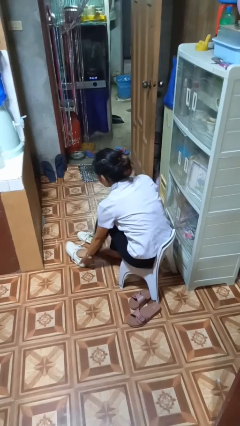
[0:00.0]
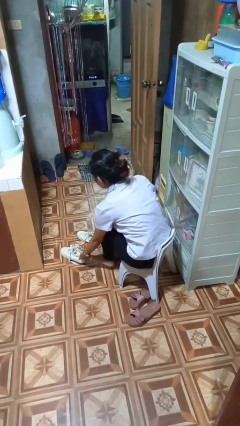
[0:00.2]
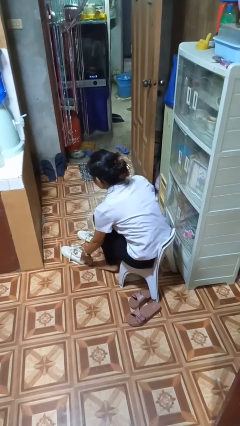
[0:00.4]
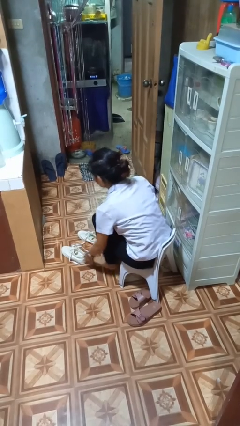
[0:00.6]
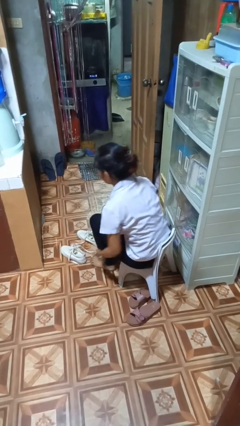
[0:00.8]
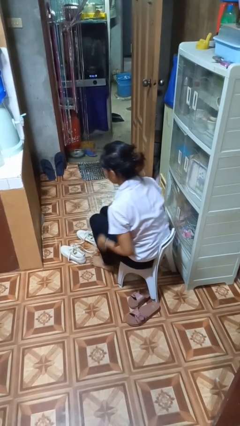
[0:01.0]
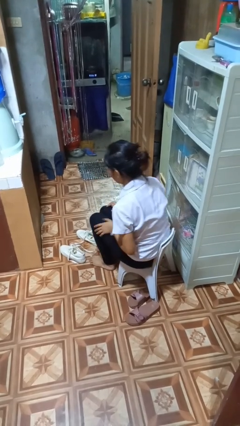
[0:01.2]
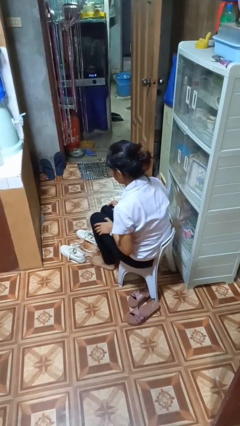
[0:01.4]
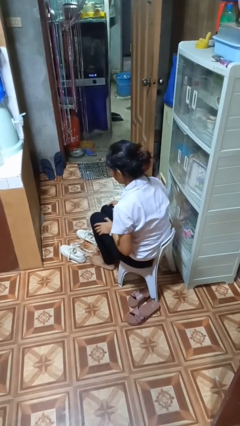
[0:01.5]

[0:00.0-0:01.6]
person takes off shoes

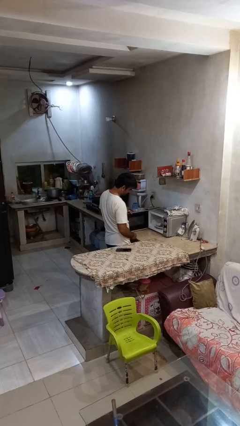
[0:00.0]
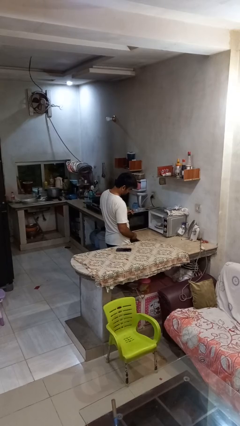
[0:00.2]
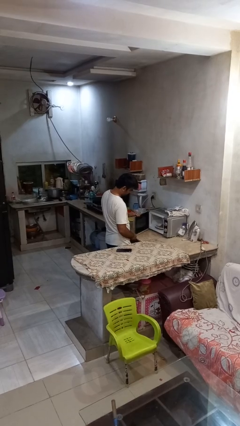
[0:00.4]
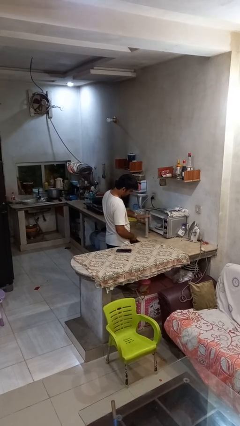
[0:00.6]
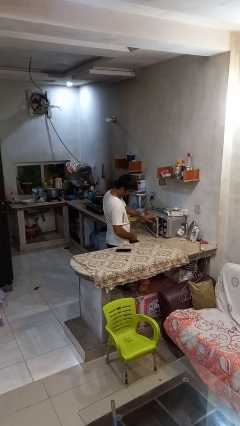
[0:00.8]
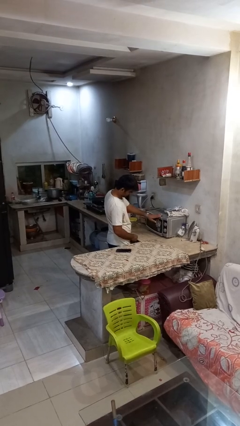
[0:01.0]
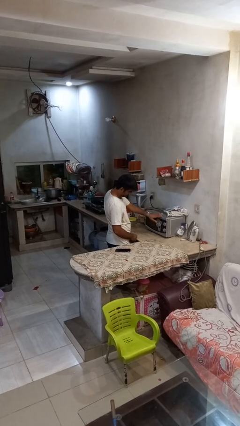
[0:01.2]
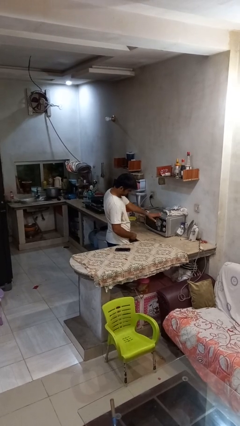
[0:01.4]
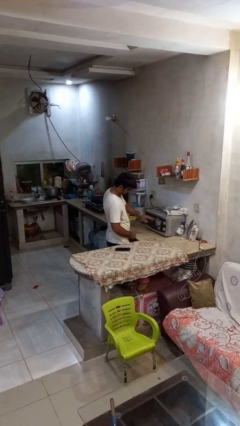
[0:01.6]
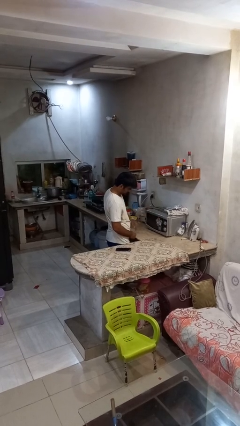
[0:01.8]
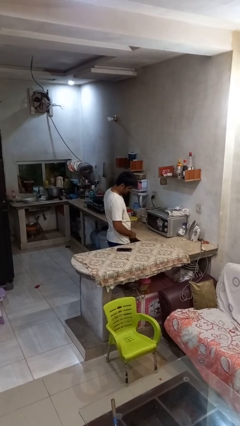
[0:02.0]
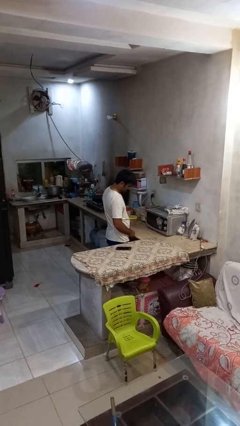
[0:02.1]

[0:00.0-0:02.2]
person closes microwave

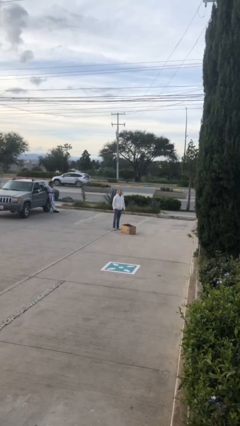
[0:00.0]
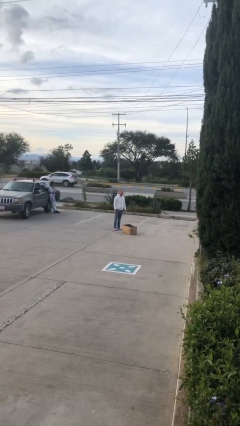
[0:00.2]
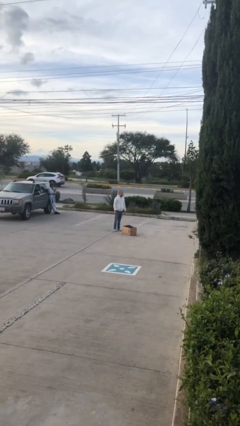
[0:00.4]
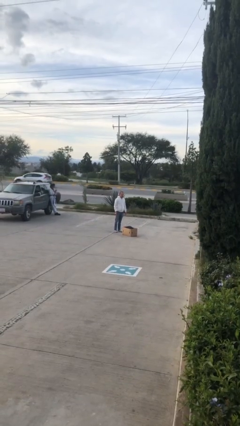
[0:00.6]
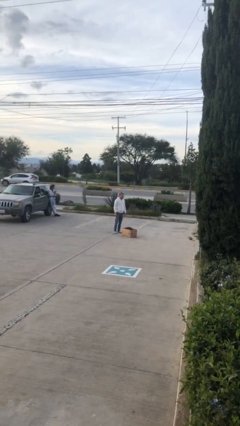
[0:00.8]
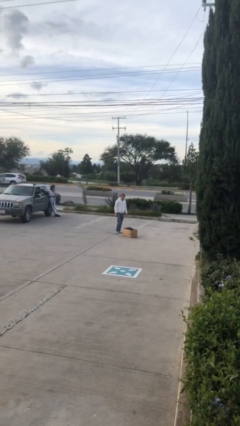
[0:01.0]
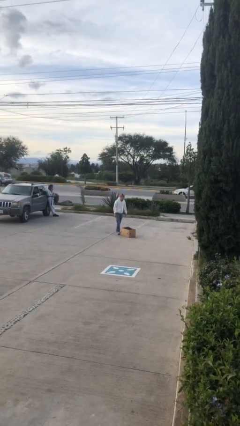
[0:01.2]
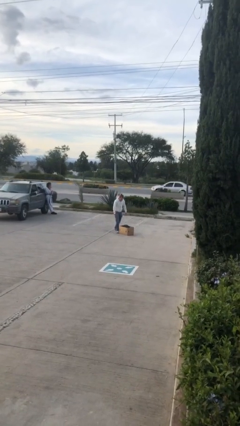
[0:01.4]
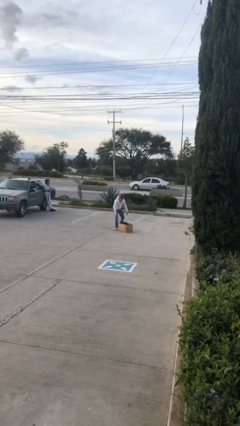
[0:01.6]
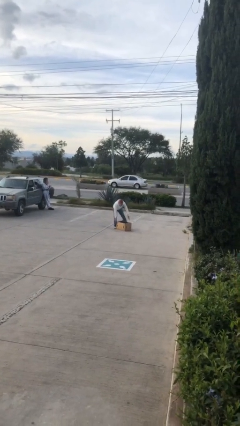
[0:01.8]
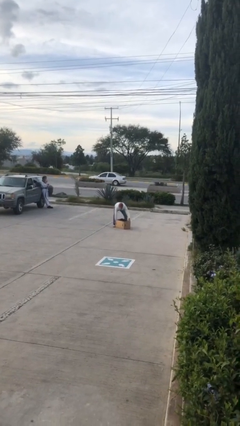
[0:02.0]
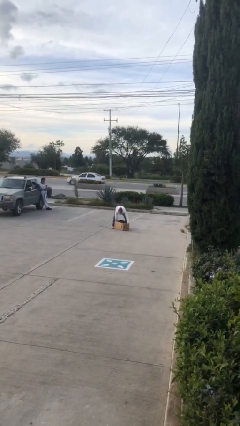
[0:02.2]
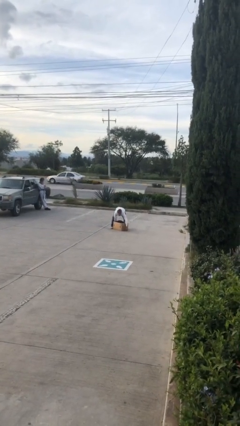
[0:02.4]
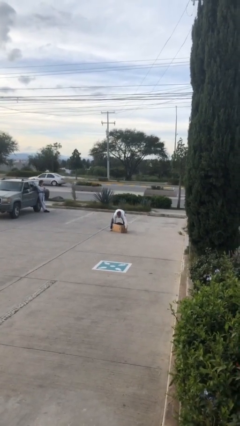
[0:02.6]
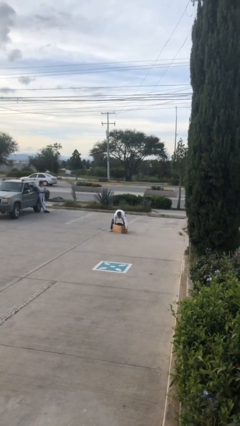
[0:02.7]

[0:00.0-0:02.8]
person picks up object from floor

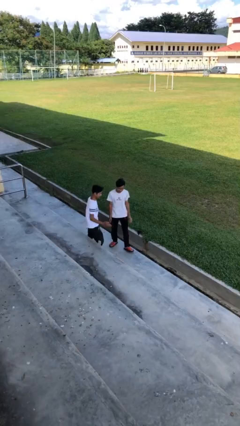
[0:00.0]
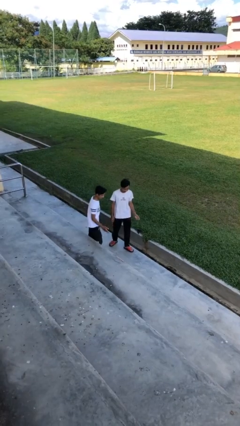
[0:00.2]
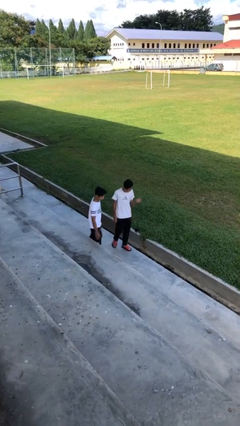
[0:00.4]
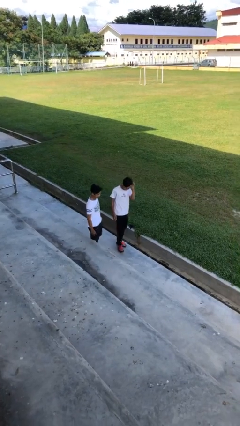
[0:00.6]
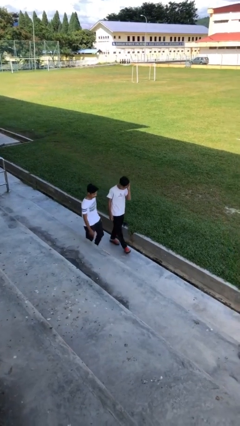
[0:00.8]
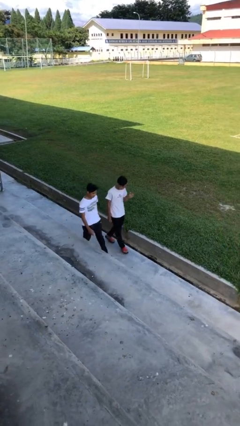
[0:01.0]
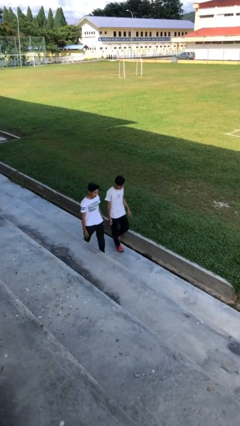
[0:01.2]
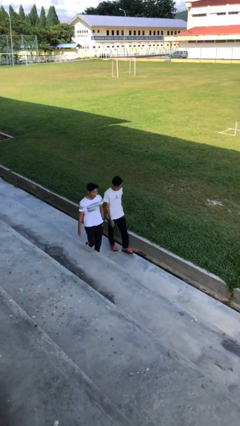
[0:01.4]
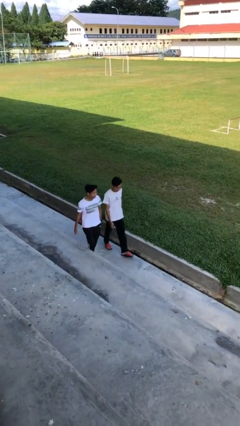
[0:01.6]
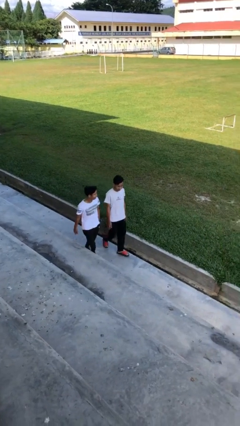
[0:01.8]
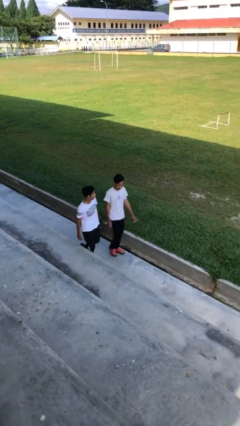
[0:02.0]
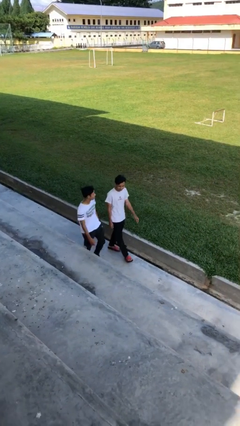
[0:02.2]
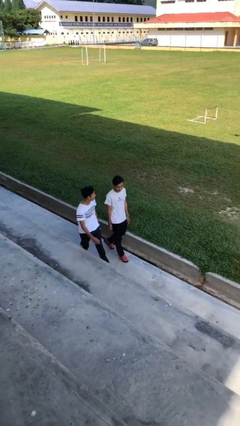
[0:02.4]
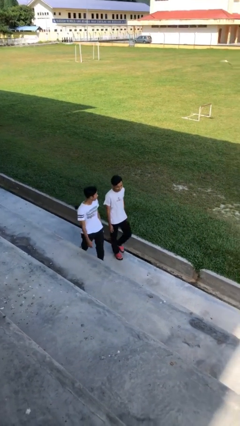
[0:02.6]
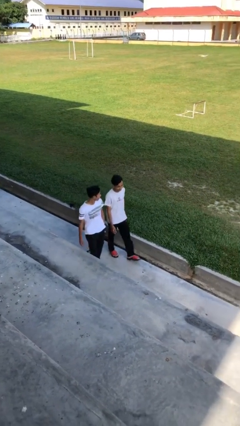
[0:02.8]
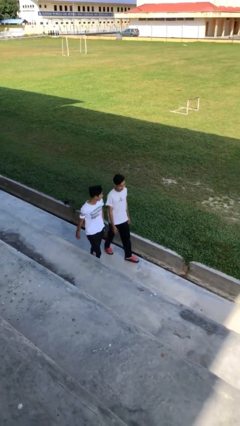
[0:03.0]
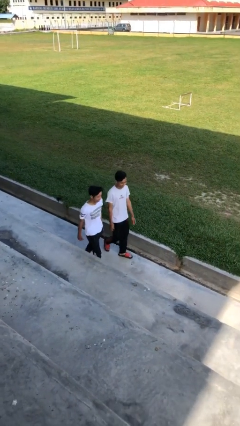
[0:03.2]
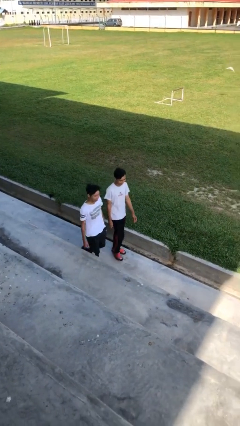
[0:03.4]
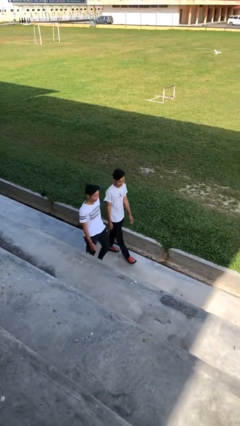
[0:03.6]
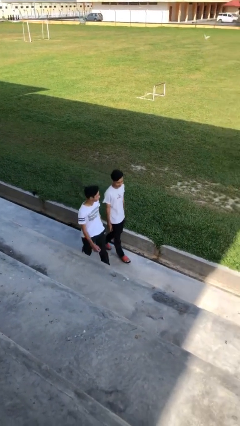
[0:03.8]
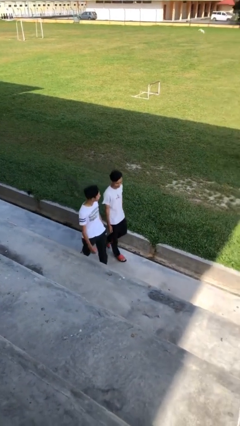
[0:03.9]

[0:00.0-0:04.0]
person talks to person

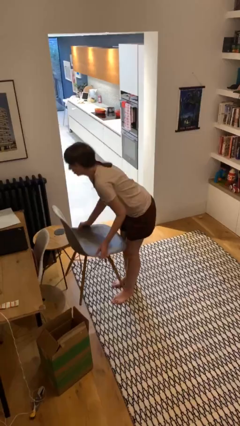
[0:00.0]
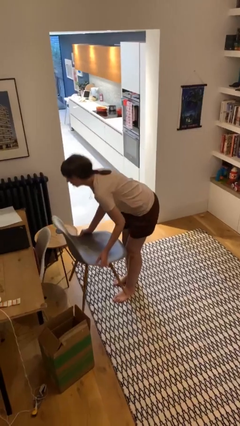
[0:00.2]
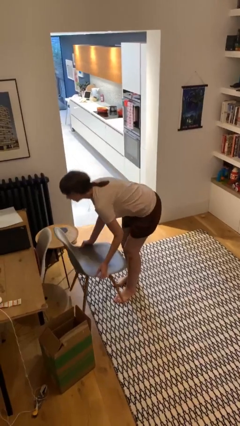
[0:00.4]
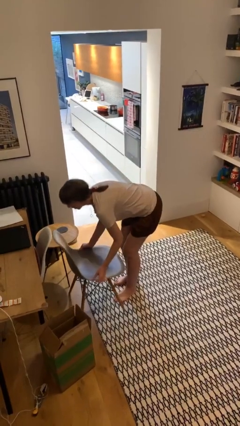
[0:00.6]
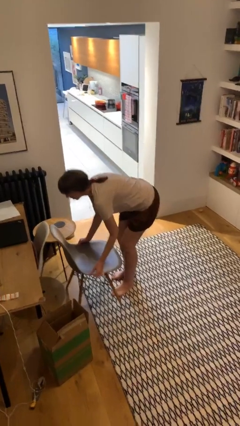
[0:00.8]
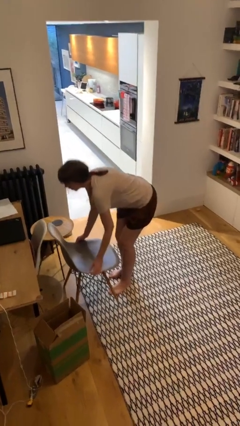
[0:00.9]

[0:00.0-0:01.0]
person puts down object on floor

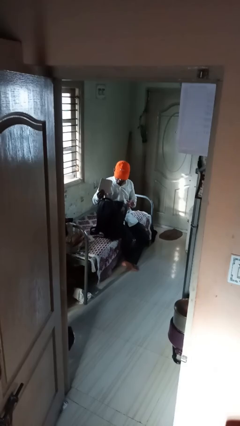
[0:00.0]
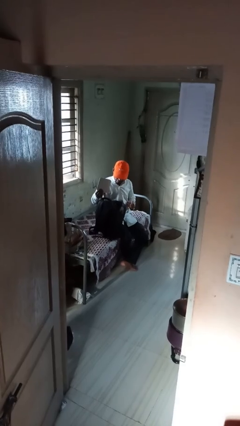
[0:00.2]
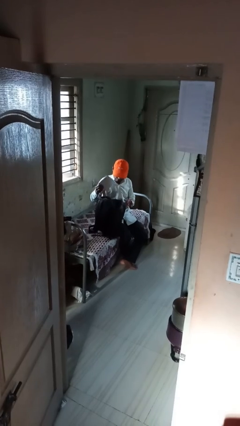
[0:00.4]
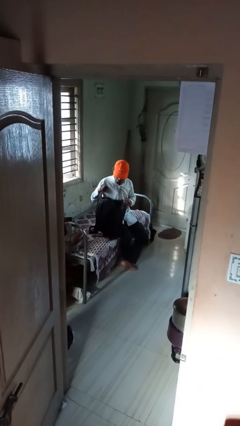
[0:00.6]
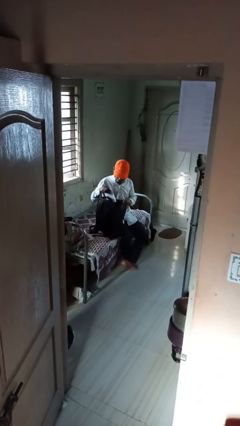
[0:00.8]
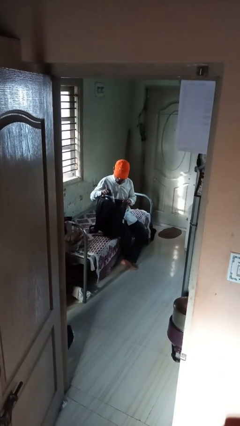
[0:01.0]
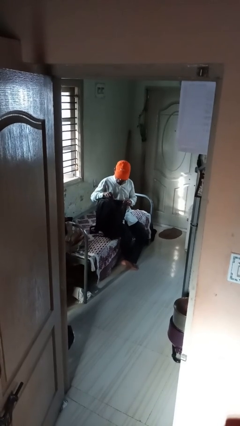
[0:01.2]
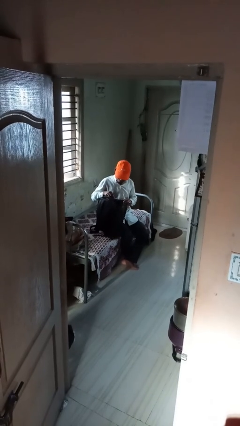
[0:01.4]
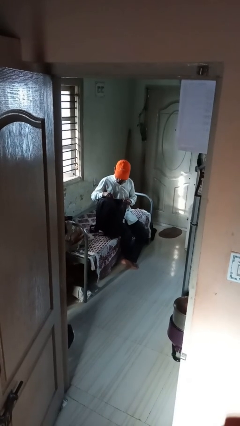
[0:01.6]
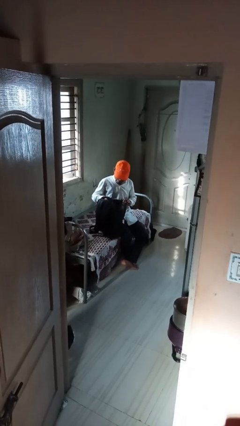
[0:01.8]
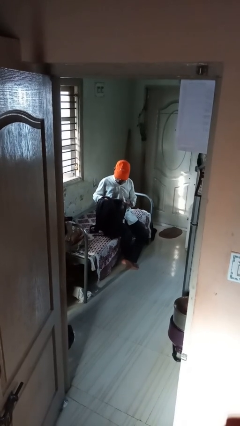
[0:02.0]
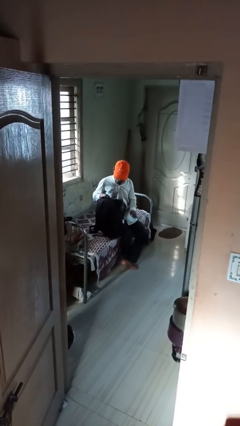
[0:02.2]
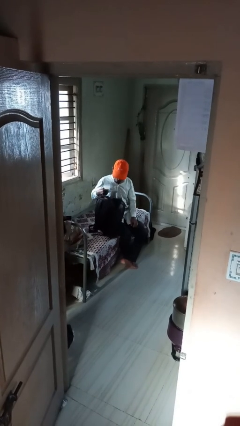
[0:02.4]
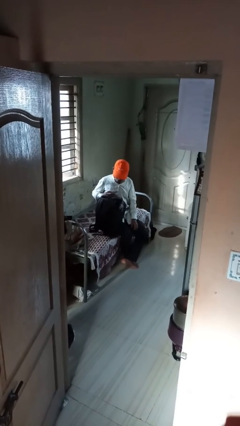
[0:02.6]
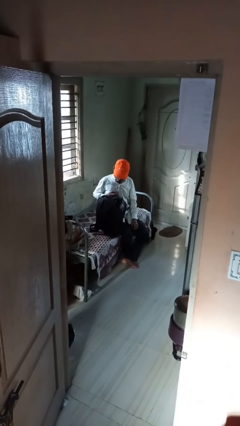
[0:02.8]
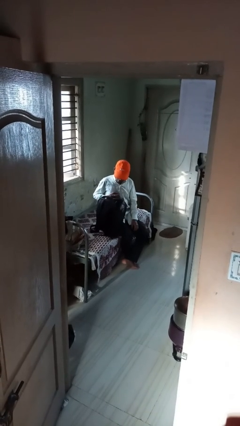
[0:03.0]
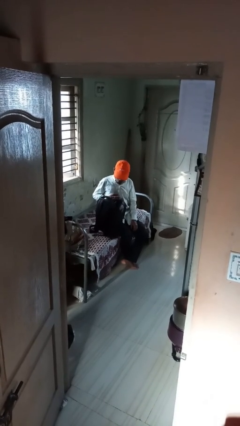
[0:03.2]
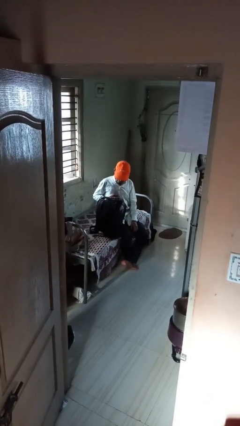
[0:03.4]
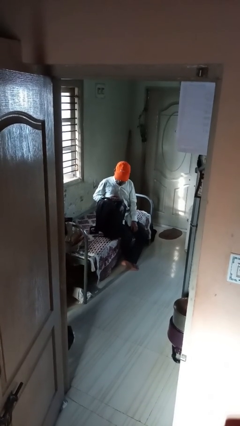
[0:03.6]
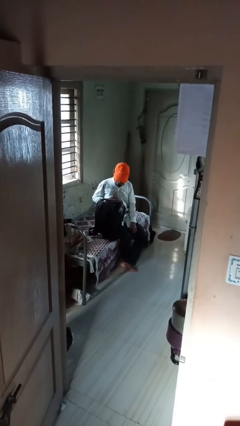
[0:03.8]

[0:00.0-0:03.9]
person puts object into backpack

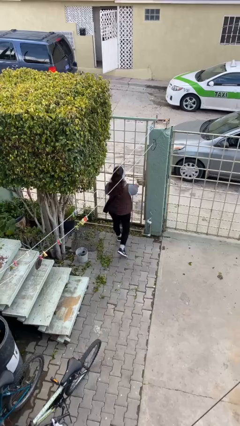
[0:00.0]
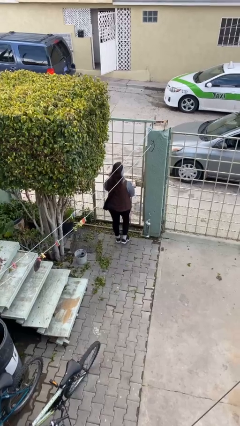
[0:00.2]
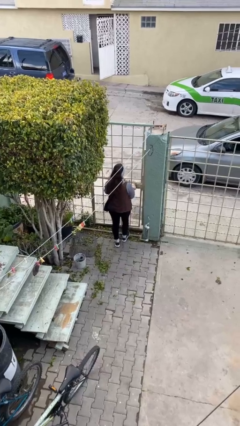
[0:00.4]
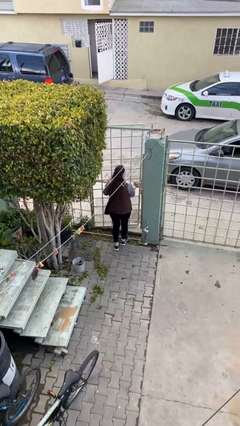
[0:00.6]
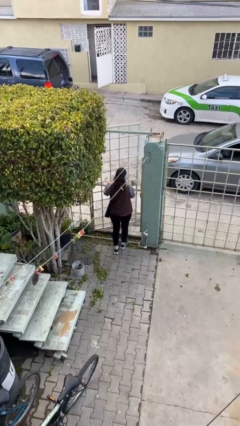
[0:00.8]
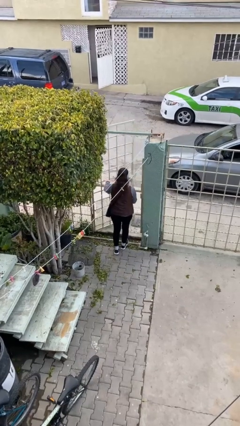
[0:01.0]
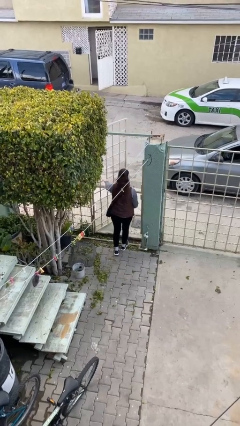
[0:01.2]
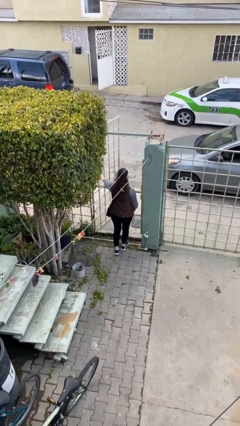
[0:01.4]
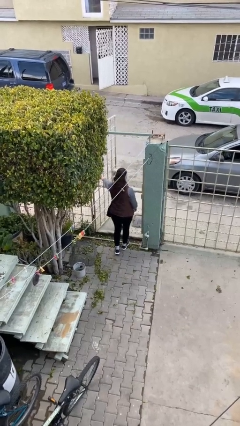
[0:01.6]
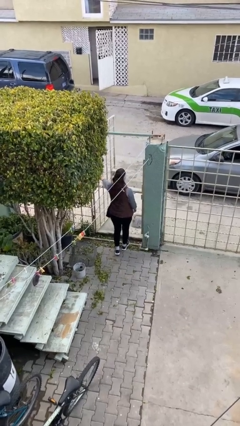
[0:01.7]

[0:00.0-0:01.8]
person opens facility door
